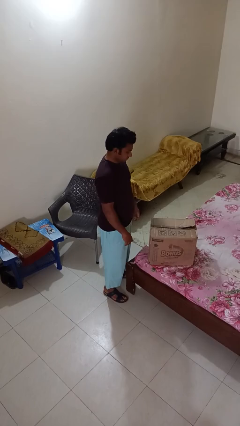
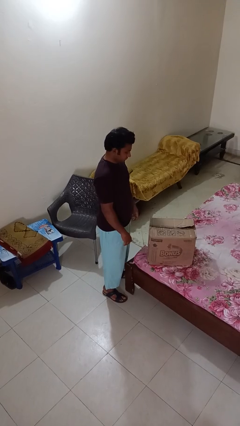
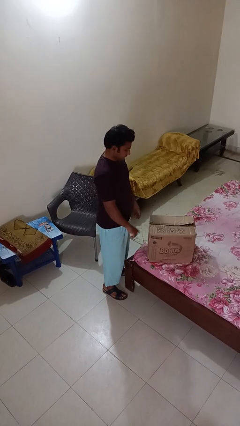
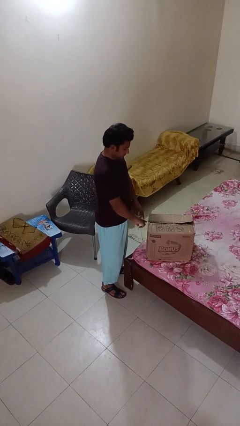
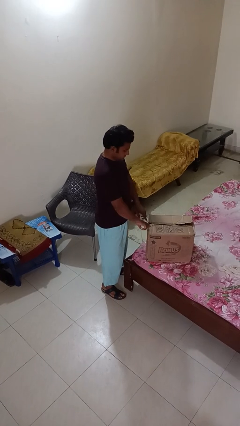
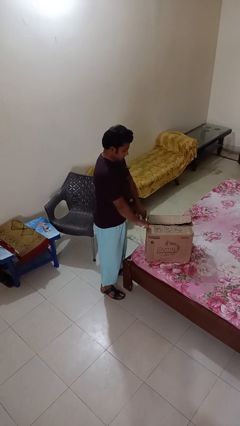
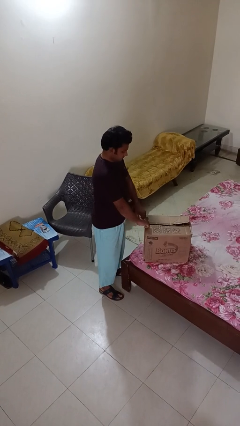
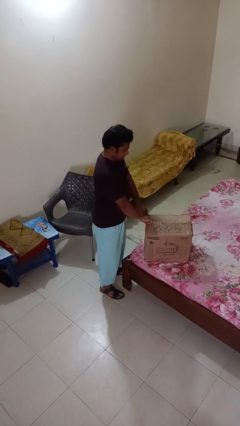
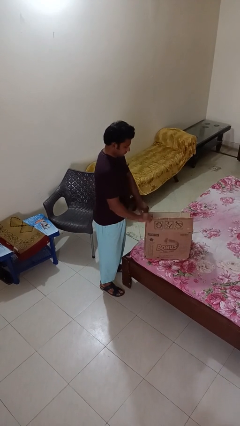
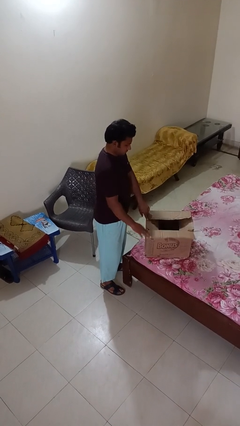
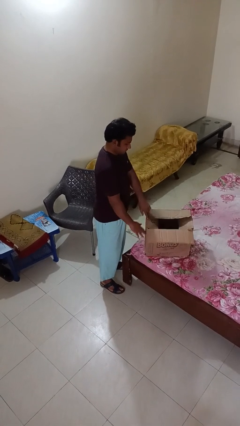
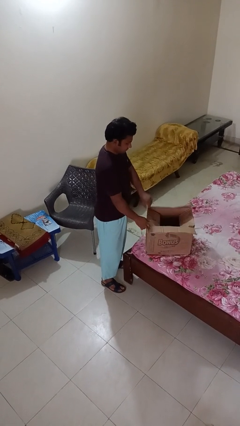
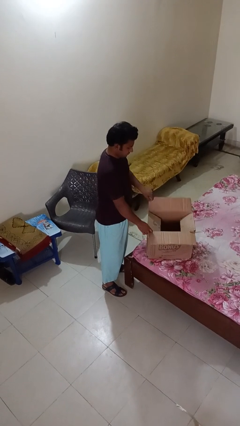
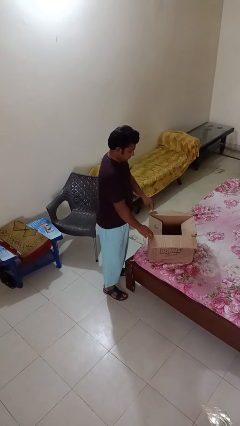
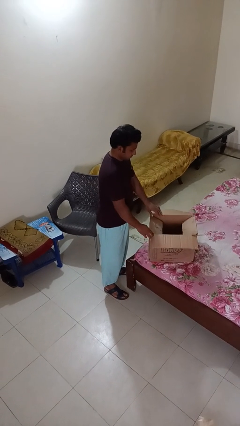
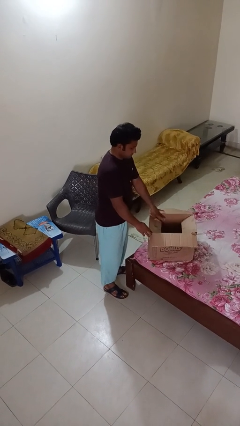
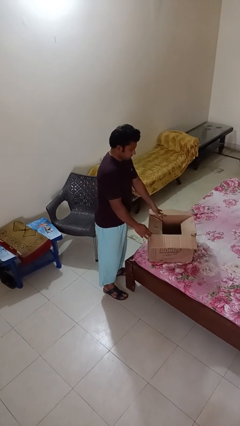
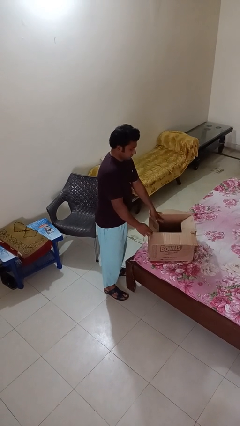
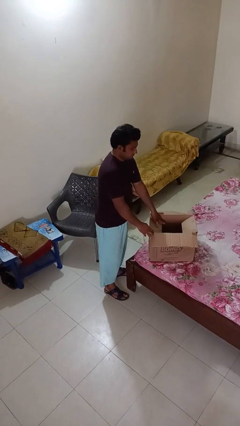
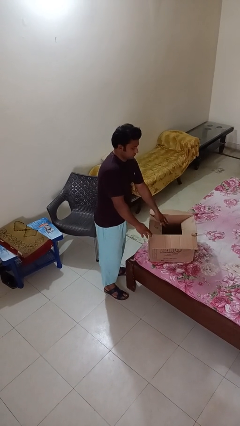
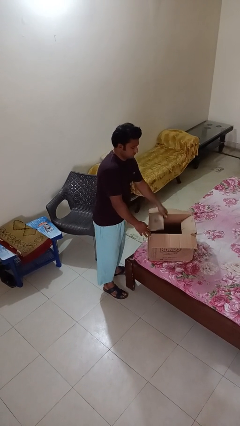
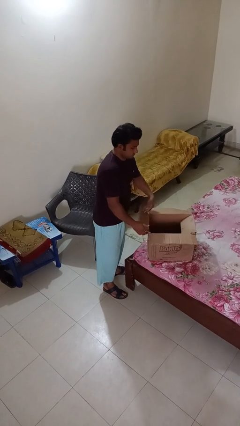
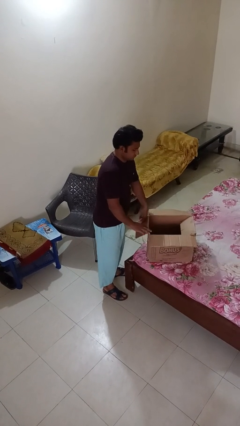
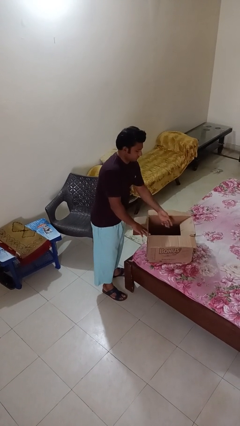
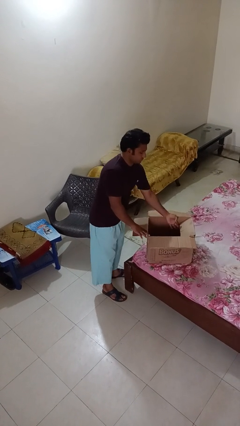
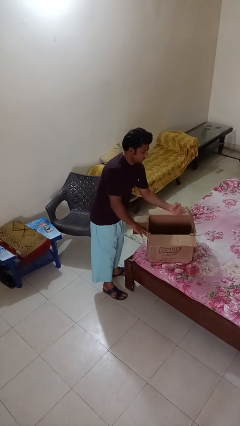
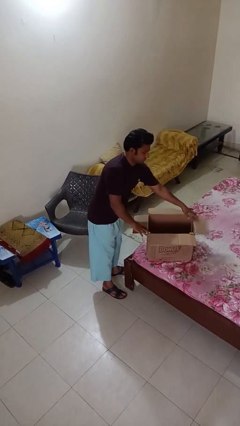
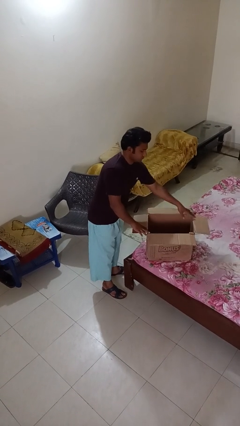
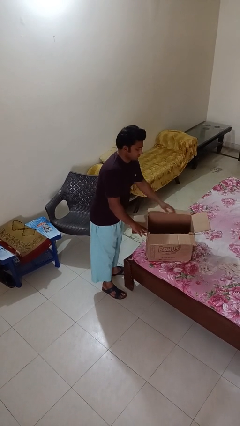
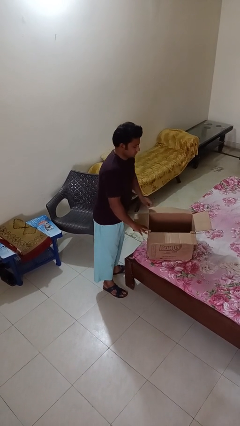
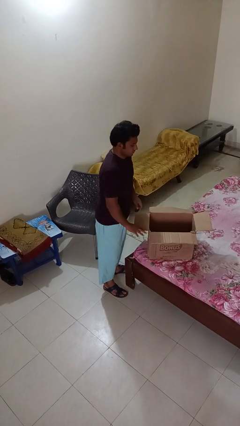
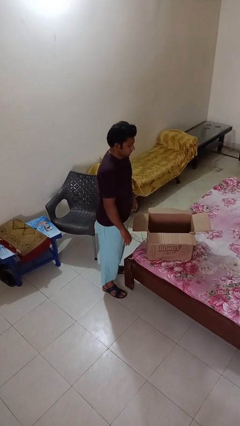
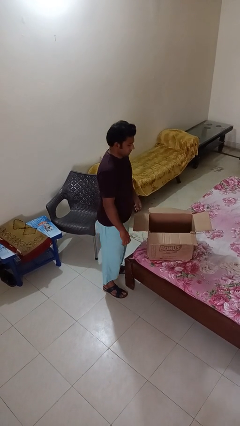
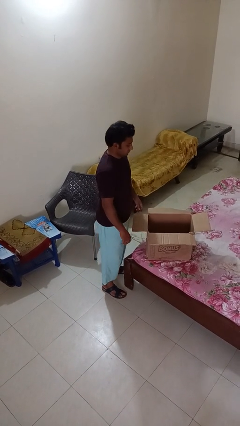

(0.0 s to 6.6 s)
person opens box

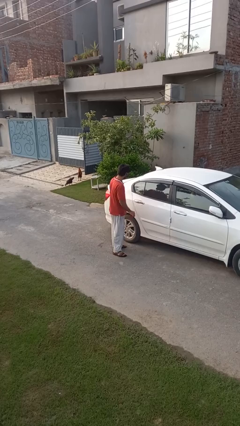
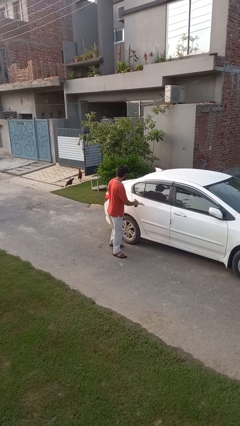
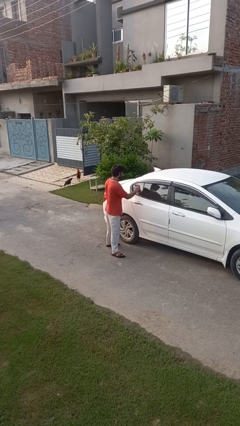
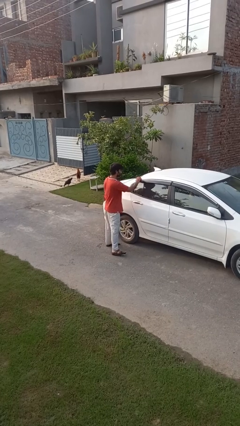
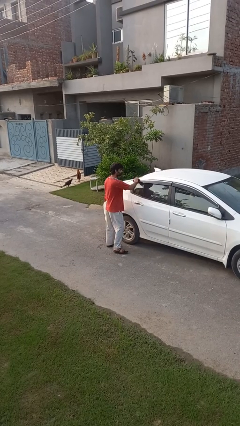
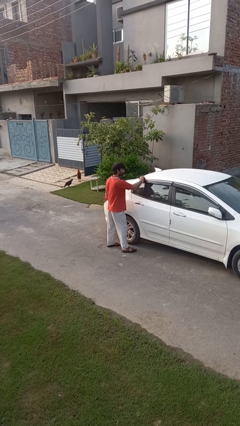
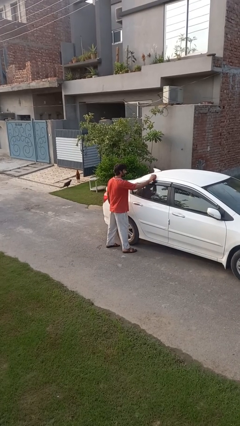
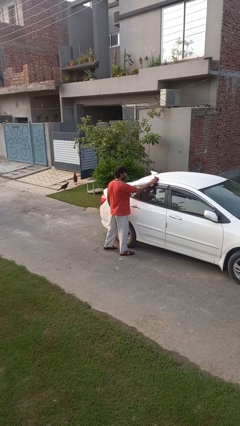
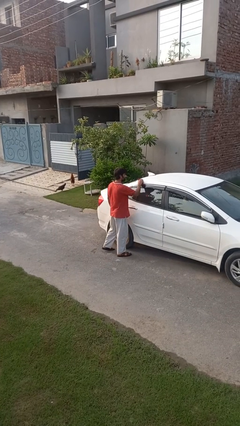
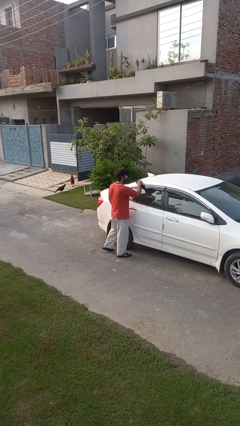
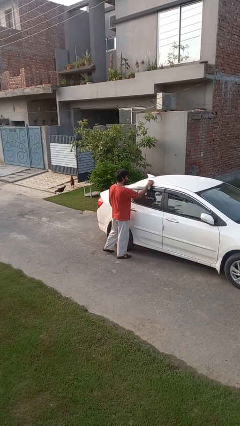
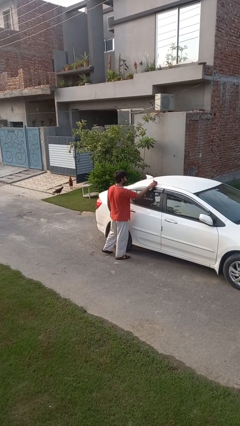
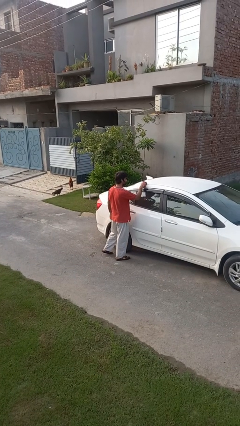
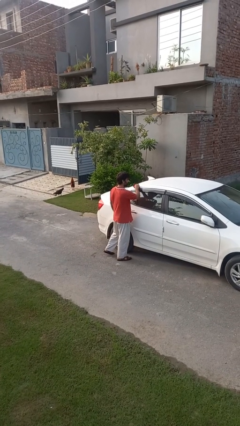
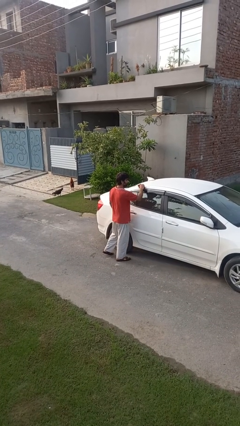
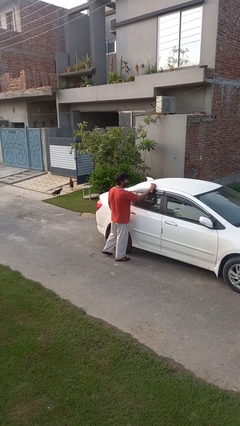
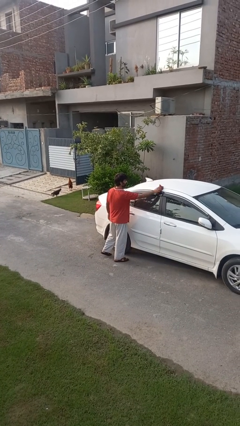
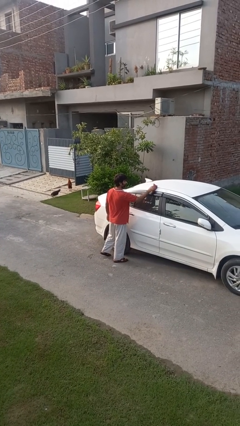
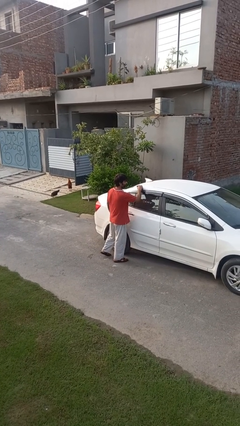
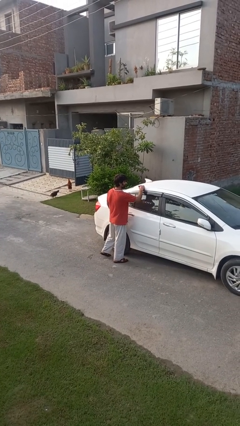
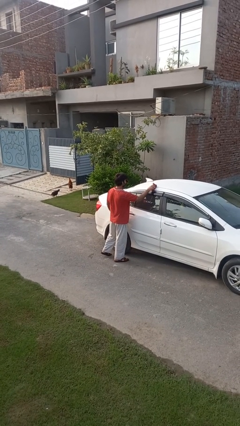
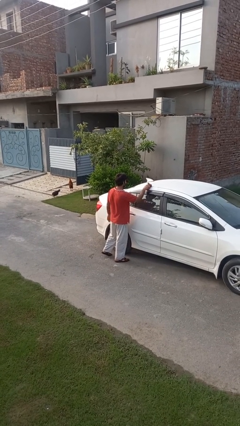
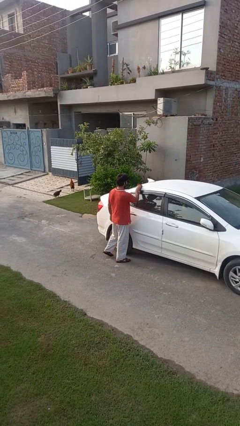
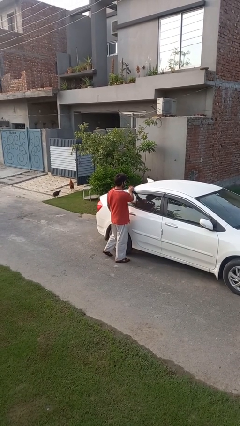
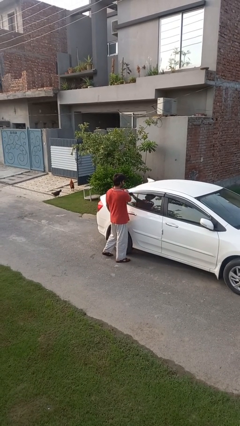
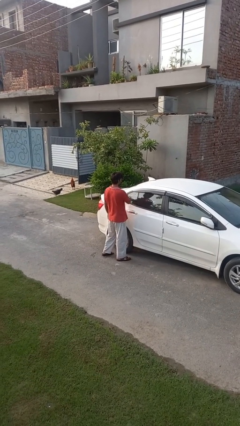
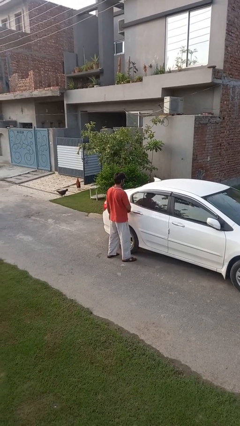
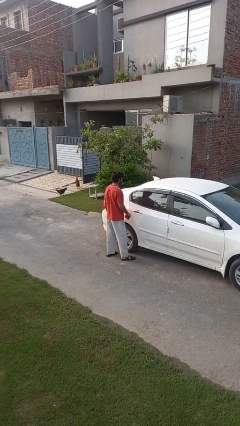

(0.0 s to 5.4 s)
person polishes car with rag

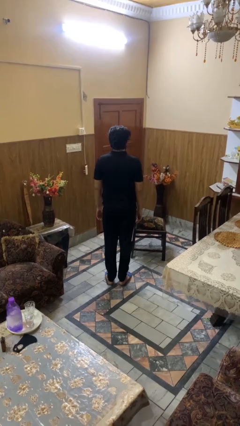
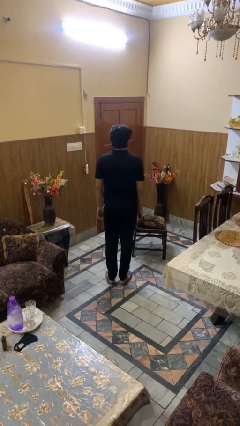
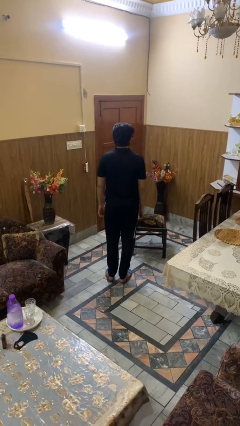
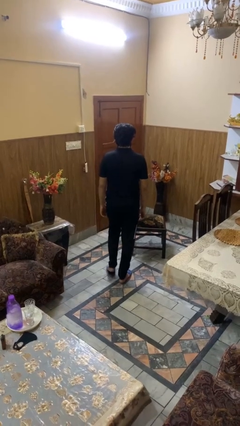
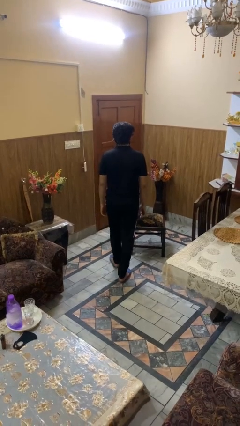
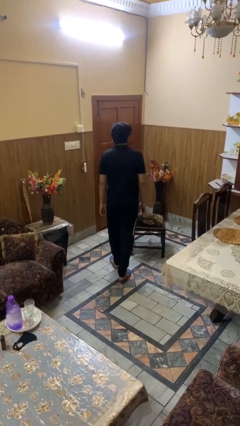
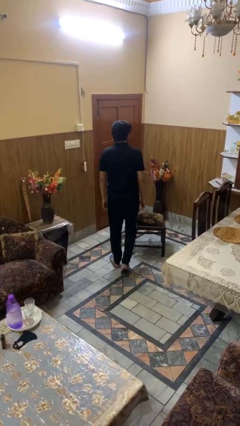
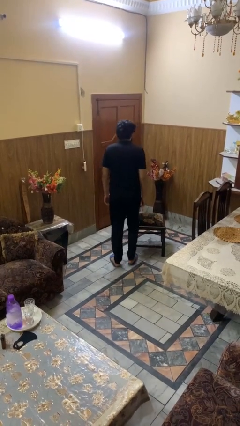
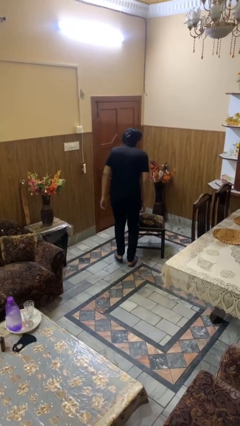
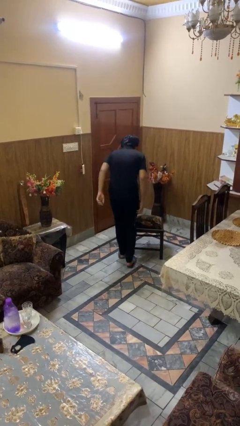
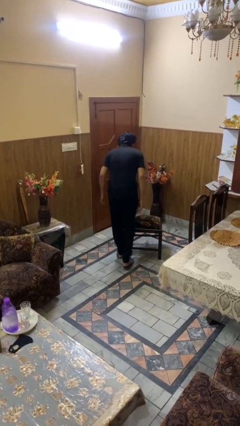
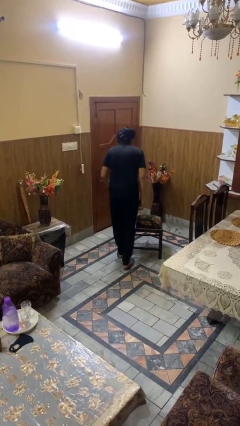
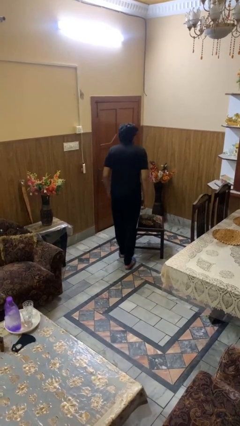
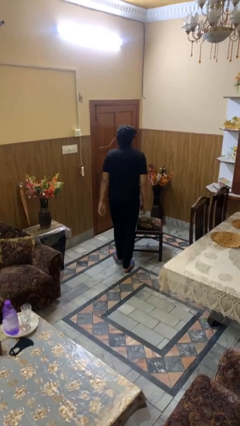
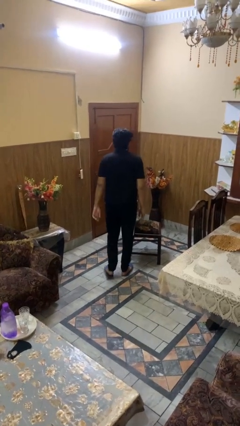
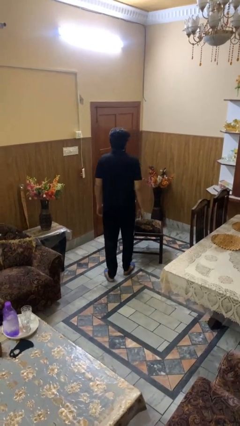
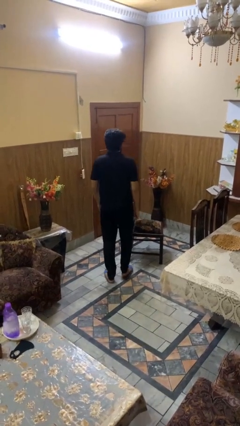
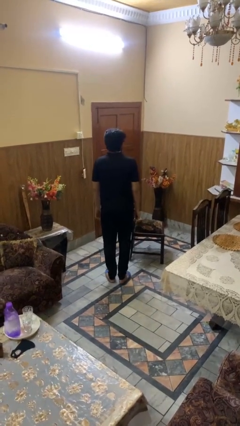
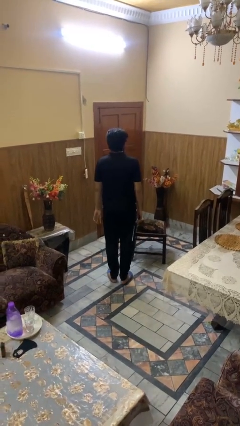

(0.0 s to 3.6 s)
person stubs toe

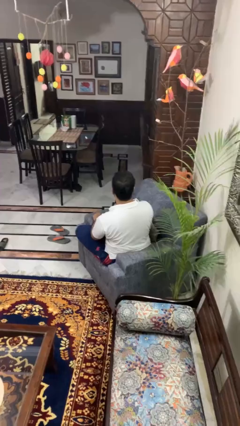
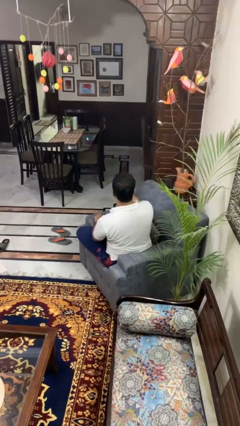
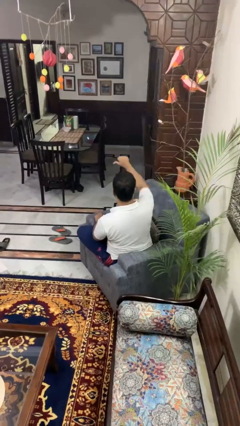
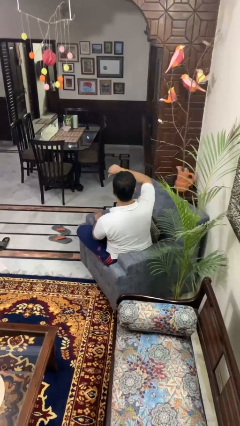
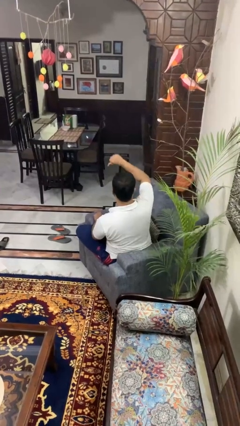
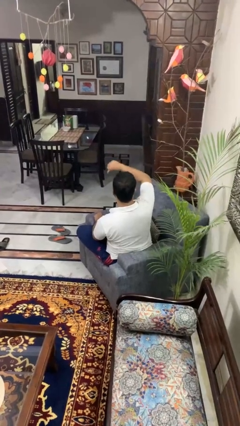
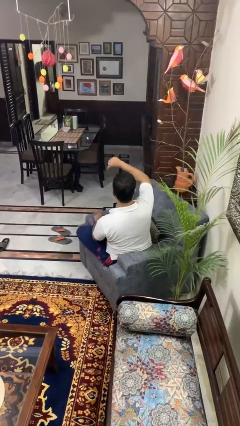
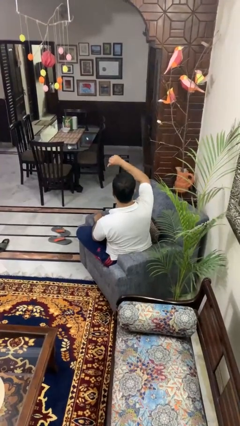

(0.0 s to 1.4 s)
person gestures thumbs down

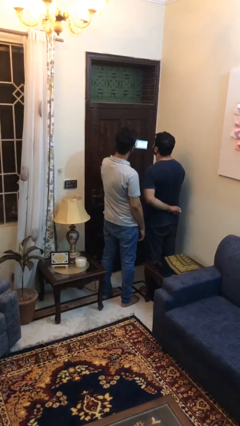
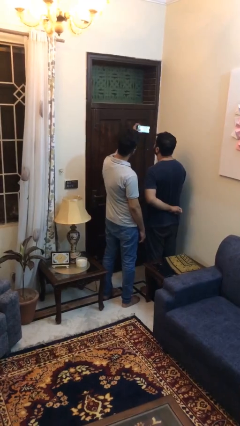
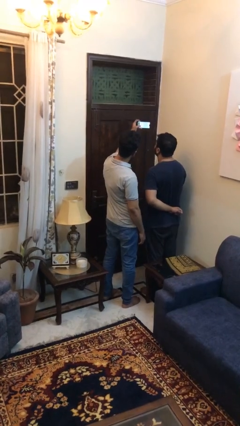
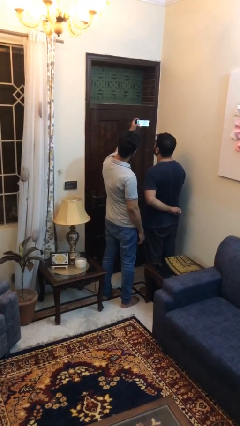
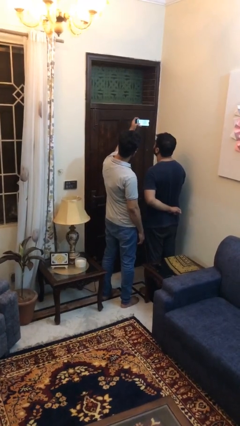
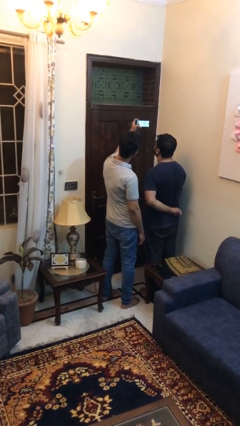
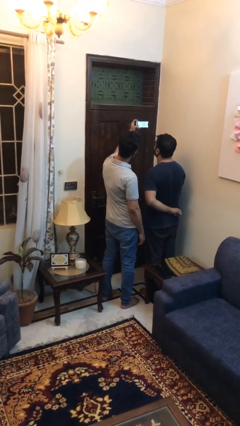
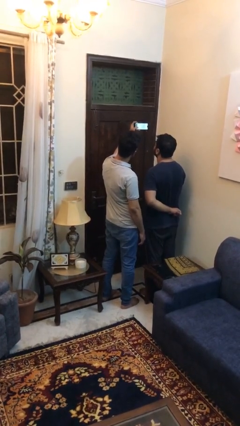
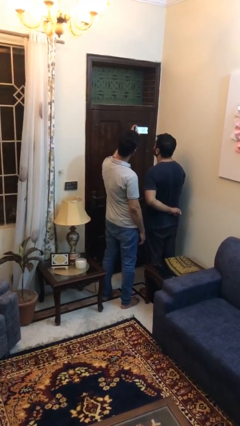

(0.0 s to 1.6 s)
person takes selfie with person
